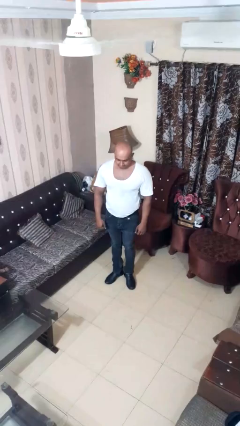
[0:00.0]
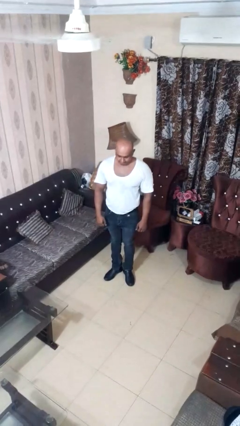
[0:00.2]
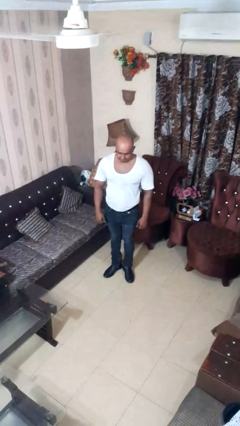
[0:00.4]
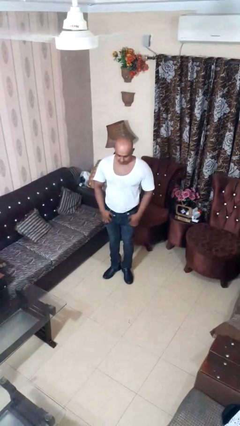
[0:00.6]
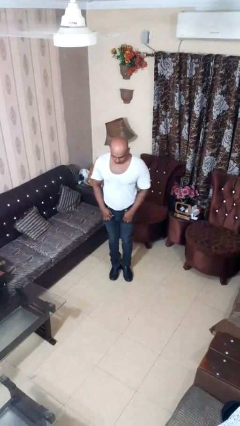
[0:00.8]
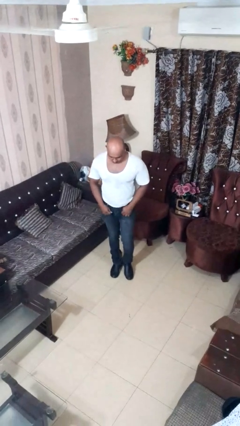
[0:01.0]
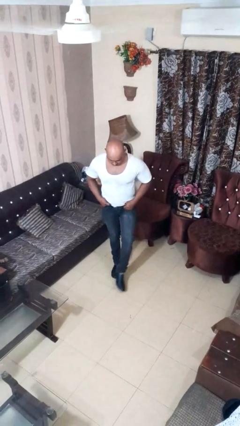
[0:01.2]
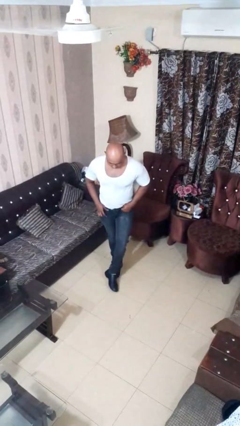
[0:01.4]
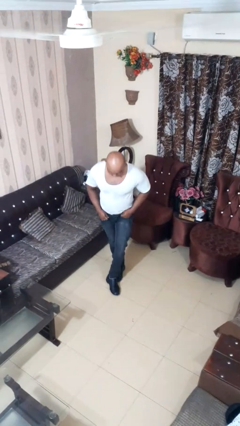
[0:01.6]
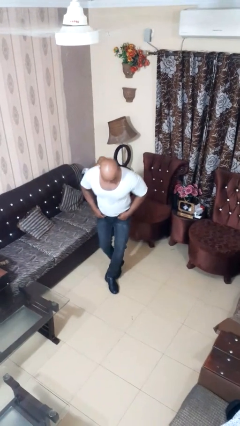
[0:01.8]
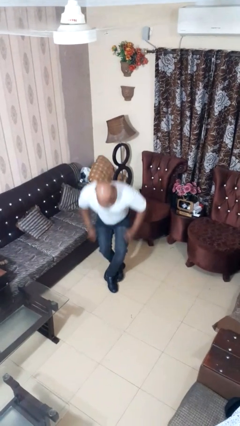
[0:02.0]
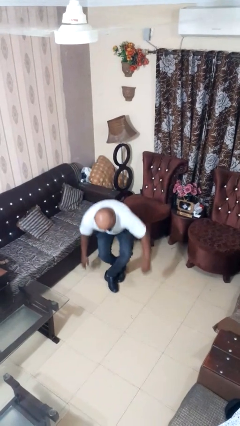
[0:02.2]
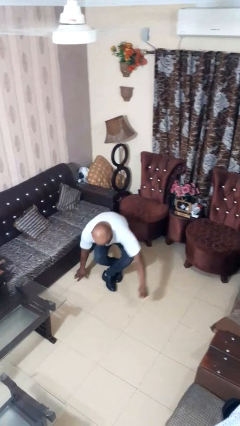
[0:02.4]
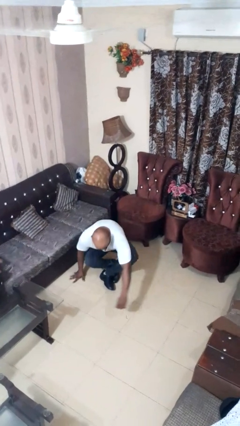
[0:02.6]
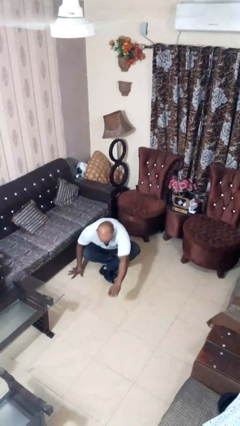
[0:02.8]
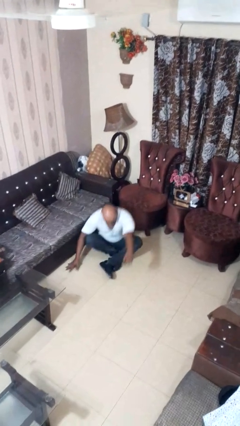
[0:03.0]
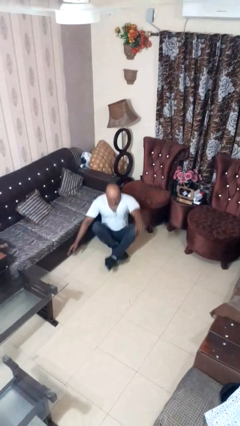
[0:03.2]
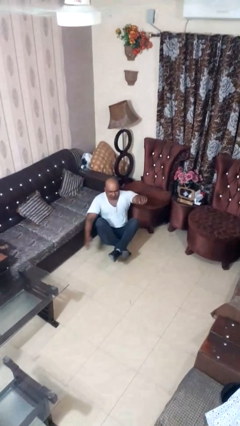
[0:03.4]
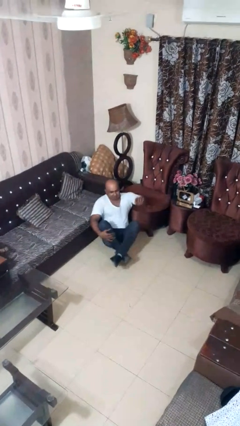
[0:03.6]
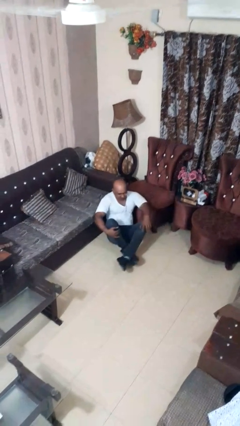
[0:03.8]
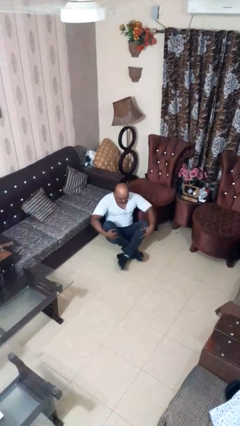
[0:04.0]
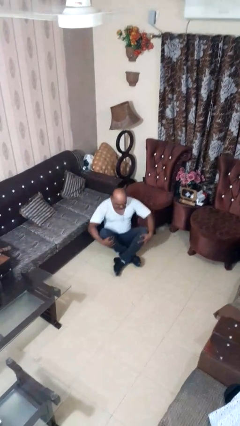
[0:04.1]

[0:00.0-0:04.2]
person sits crisscross

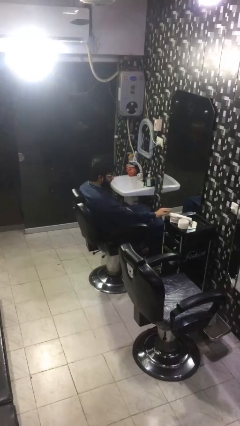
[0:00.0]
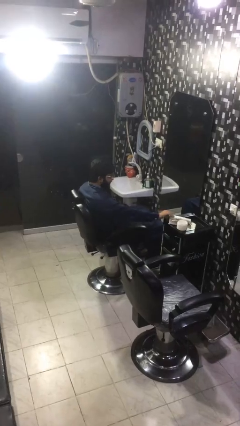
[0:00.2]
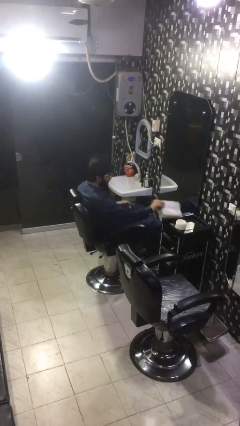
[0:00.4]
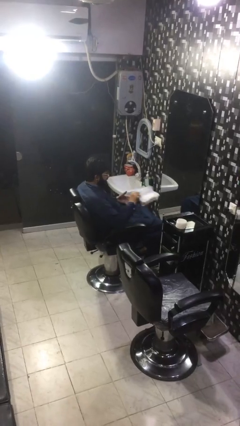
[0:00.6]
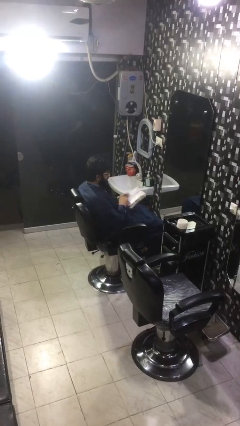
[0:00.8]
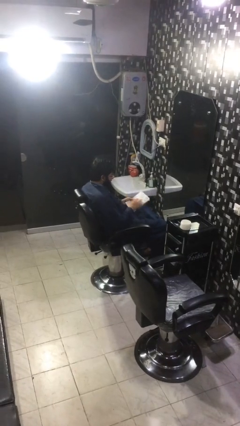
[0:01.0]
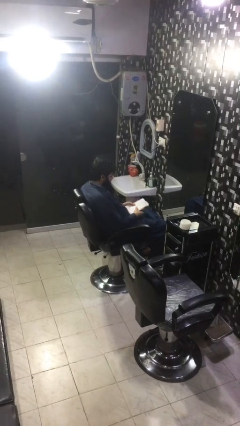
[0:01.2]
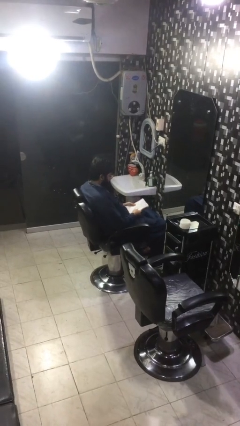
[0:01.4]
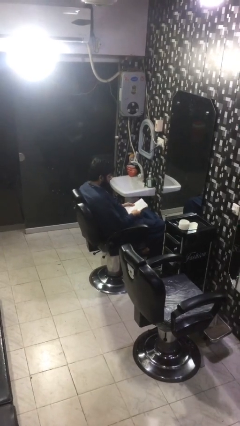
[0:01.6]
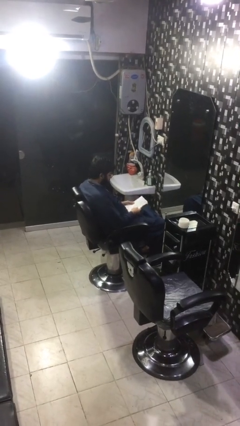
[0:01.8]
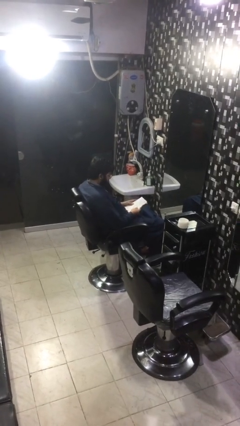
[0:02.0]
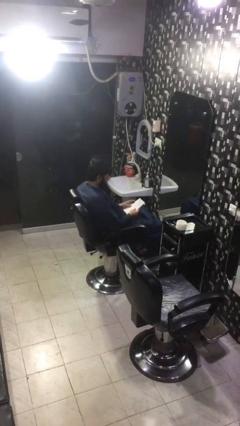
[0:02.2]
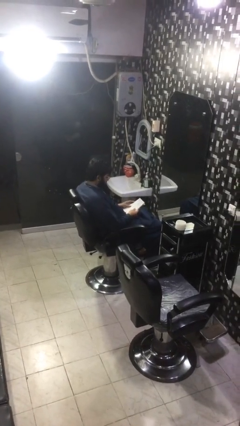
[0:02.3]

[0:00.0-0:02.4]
person picks up object from table

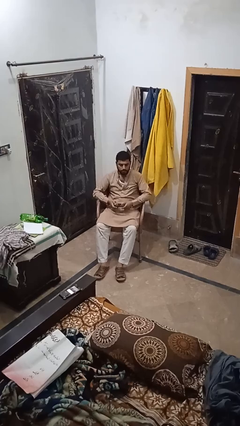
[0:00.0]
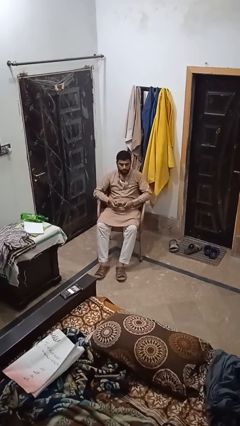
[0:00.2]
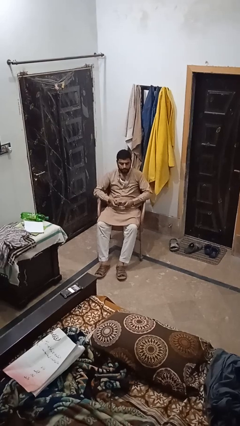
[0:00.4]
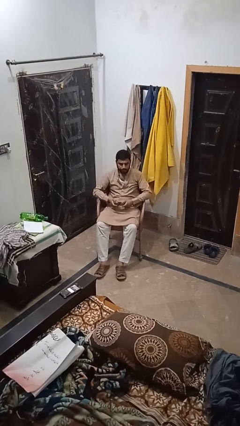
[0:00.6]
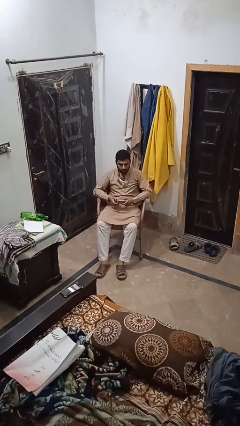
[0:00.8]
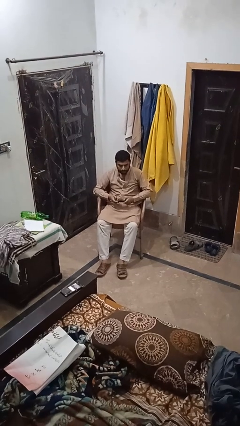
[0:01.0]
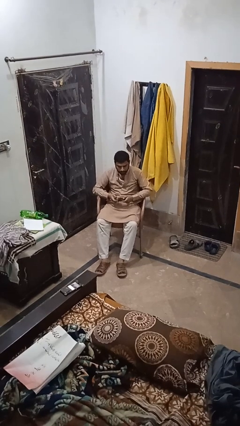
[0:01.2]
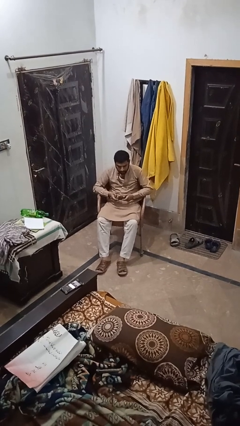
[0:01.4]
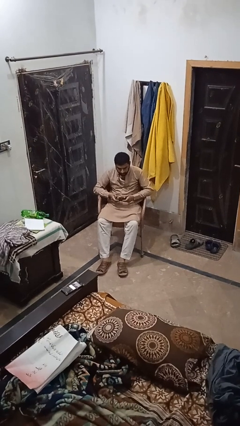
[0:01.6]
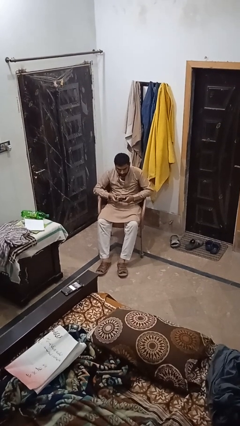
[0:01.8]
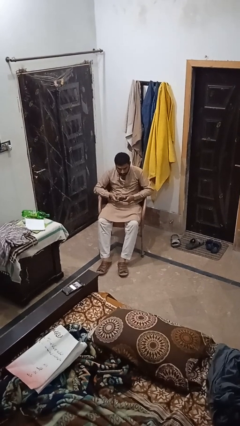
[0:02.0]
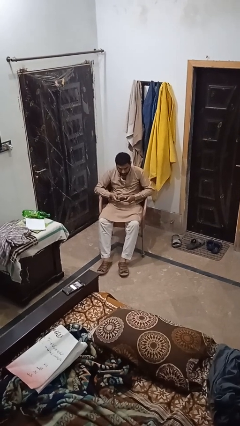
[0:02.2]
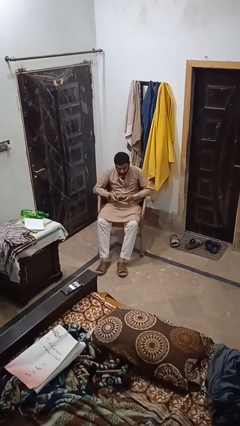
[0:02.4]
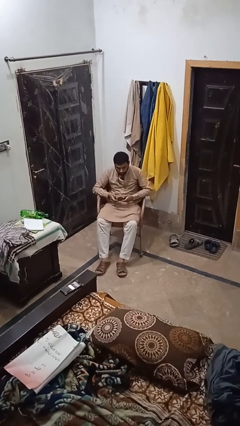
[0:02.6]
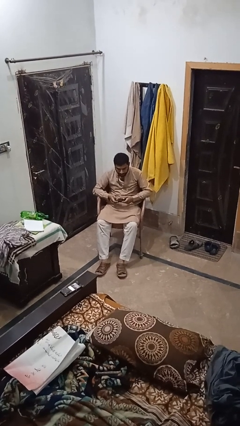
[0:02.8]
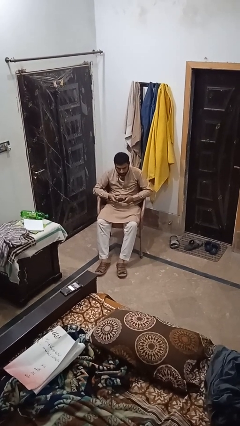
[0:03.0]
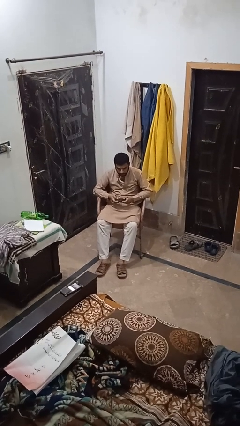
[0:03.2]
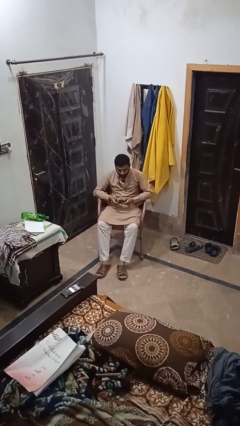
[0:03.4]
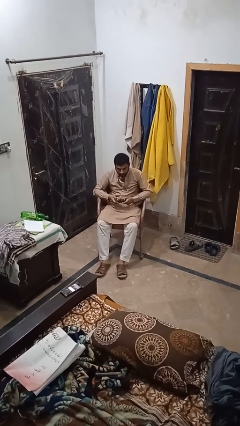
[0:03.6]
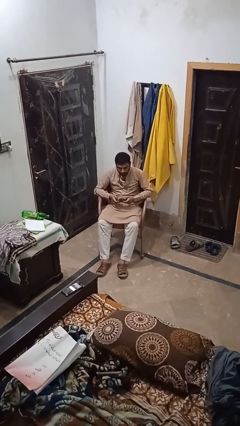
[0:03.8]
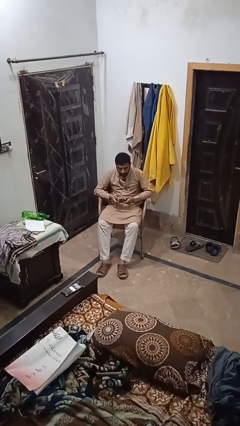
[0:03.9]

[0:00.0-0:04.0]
person interacts with handheld game

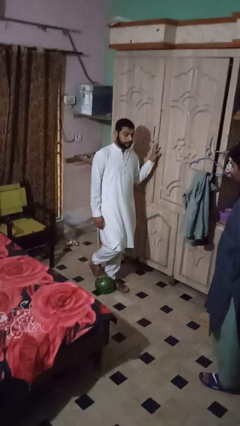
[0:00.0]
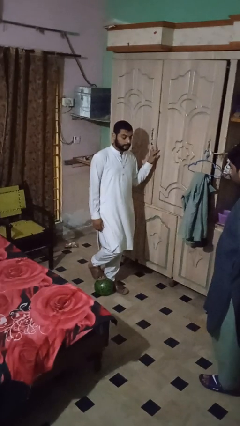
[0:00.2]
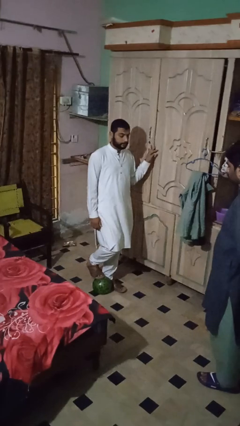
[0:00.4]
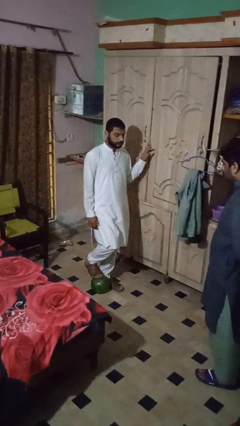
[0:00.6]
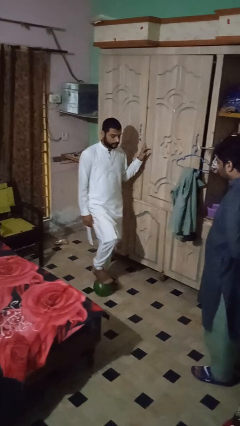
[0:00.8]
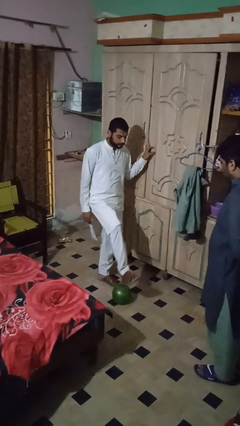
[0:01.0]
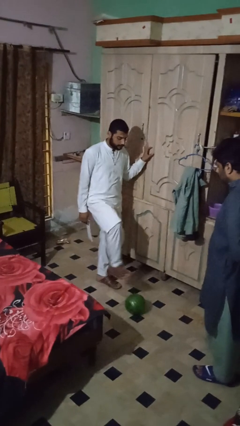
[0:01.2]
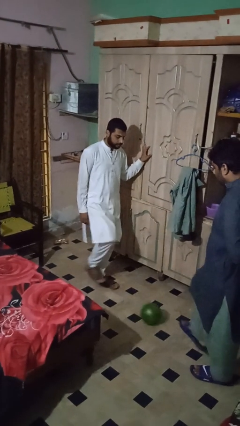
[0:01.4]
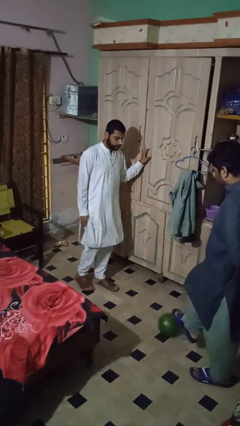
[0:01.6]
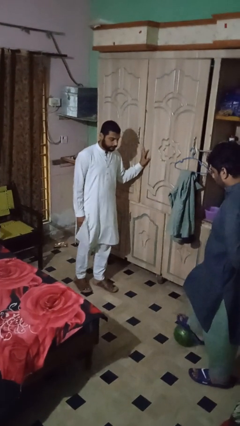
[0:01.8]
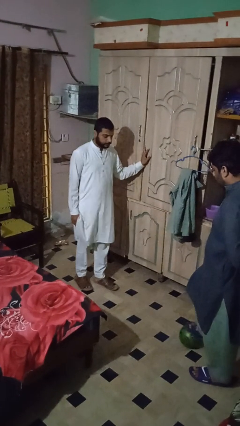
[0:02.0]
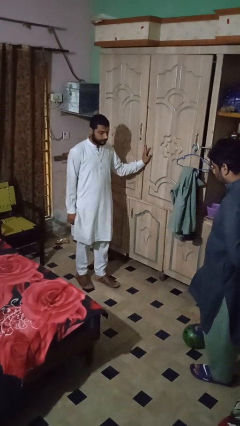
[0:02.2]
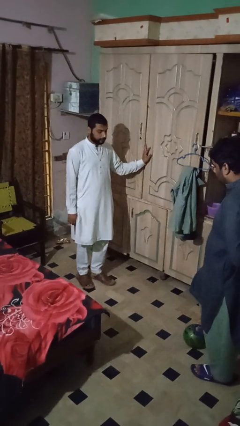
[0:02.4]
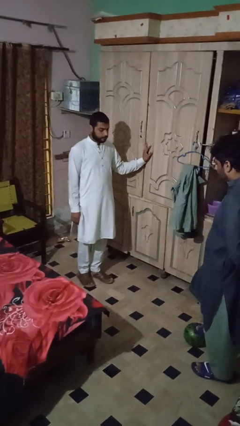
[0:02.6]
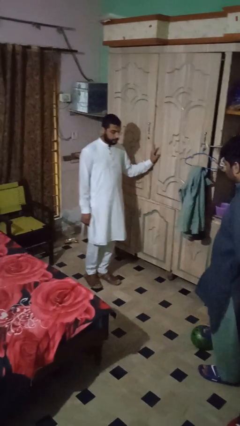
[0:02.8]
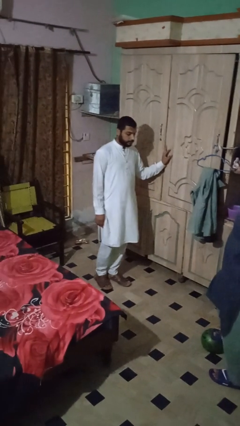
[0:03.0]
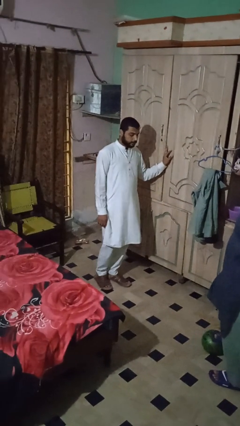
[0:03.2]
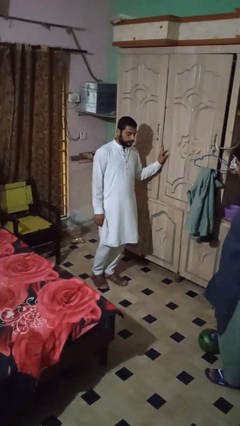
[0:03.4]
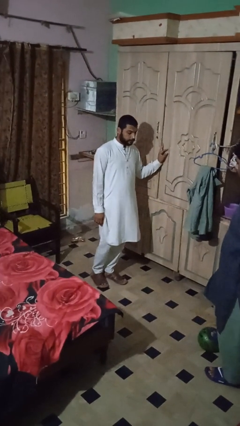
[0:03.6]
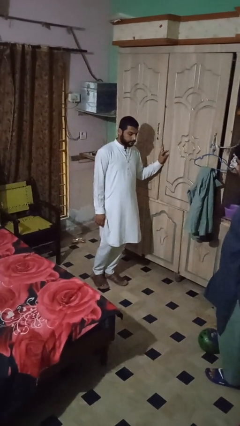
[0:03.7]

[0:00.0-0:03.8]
person kicks object to person

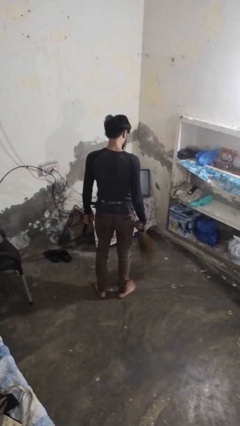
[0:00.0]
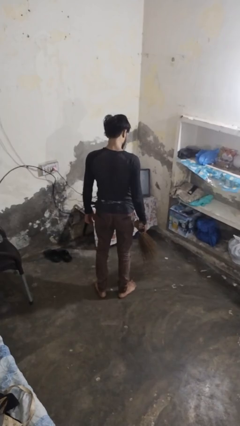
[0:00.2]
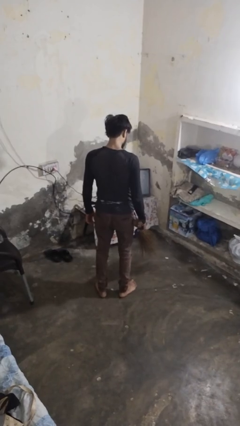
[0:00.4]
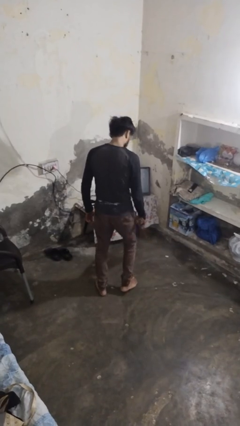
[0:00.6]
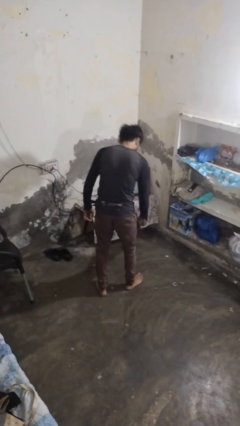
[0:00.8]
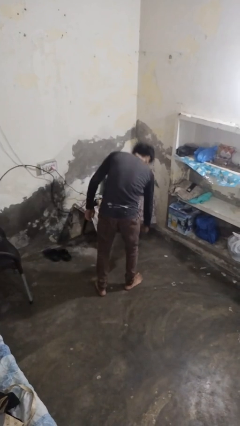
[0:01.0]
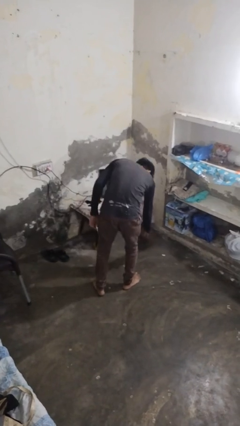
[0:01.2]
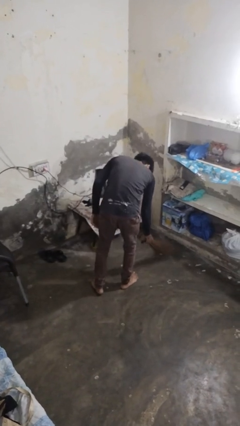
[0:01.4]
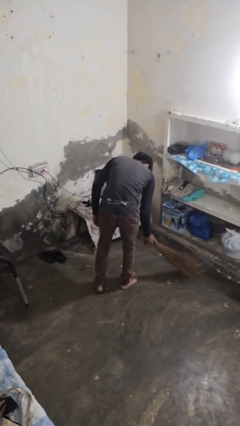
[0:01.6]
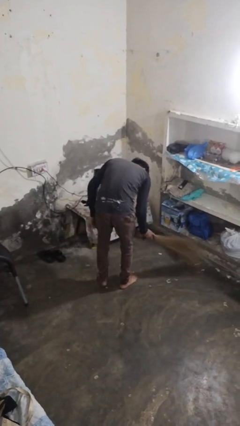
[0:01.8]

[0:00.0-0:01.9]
person sweeps floor

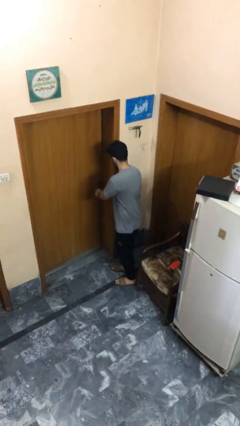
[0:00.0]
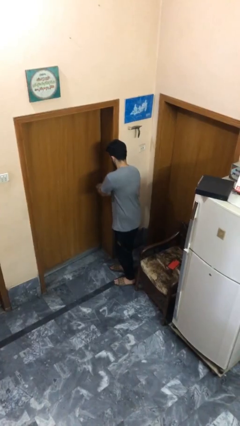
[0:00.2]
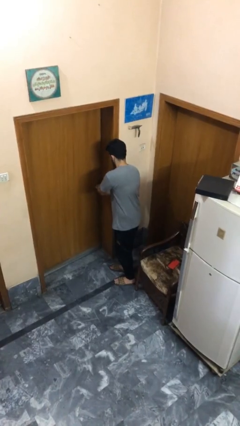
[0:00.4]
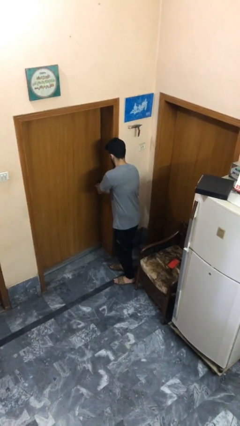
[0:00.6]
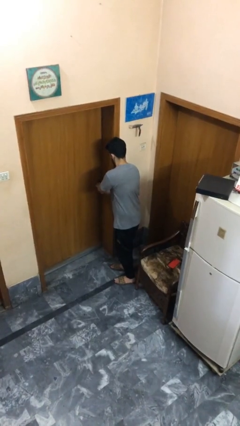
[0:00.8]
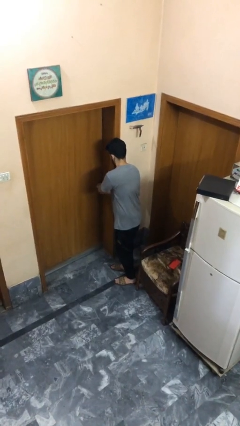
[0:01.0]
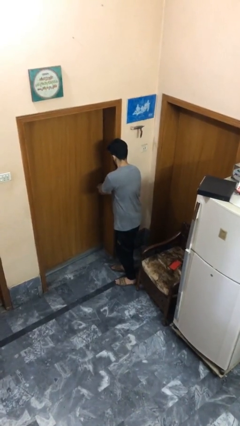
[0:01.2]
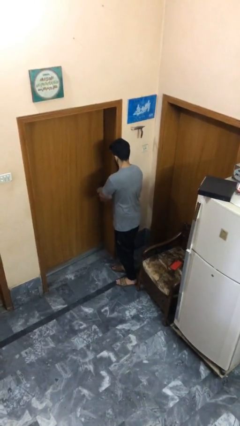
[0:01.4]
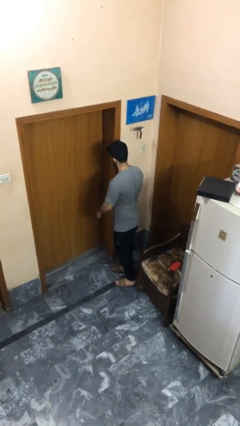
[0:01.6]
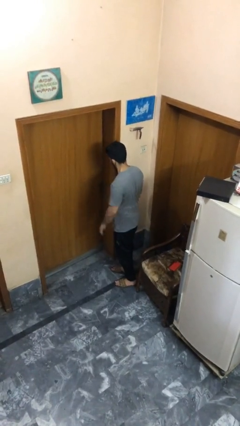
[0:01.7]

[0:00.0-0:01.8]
person locks door with keys
